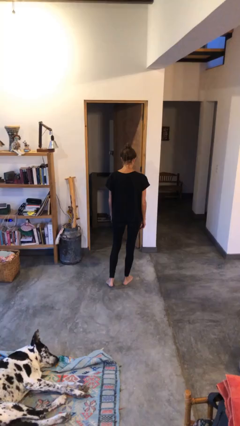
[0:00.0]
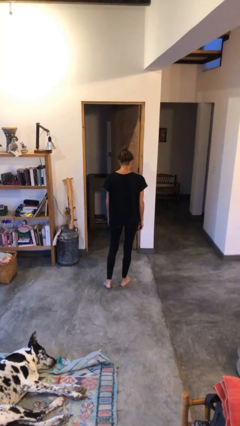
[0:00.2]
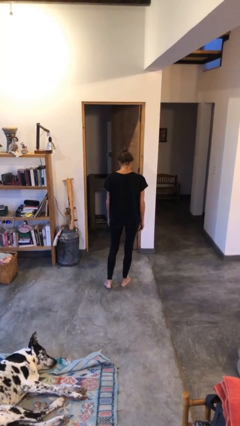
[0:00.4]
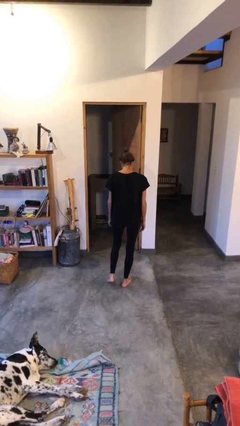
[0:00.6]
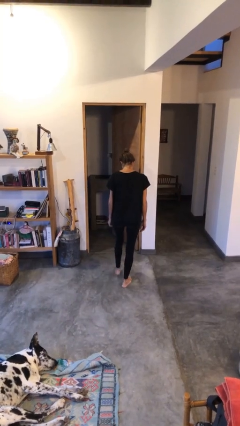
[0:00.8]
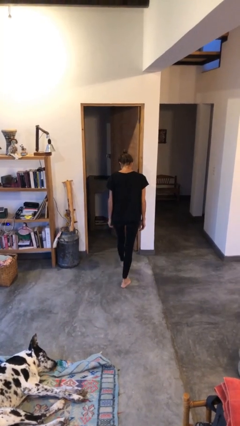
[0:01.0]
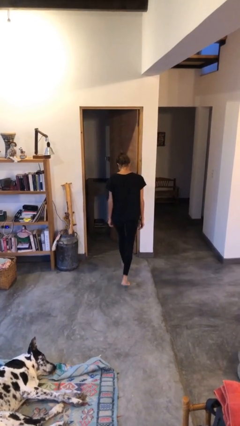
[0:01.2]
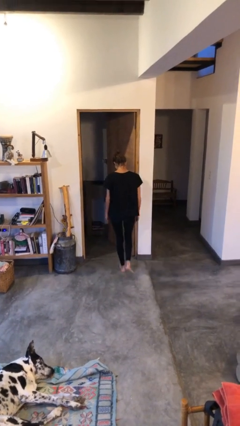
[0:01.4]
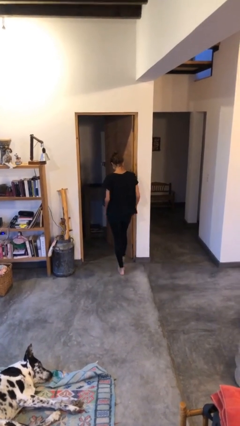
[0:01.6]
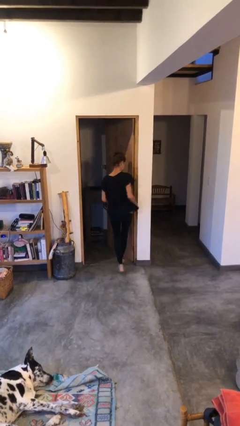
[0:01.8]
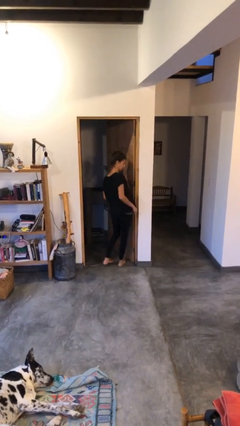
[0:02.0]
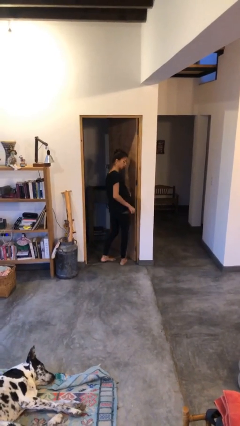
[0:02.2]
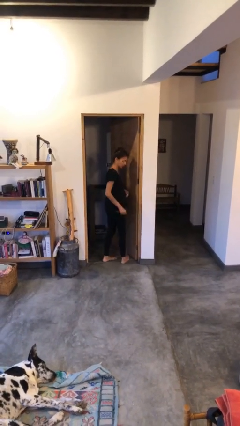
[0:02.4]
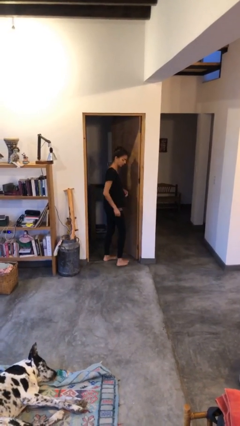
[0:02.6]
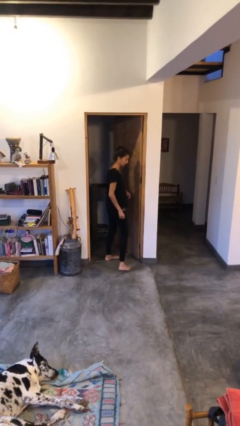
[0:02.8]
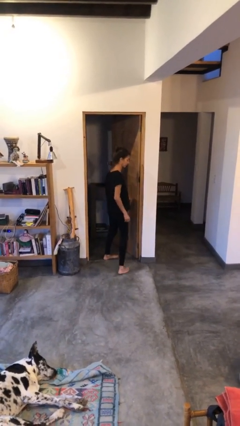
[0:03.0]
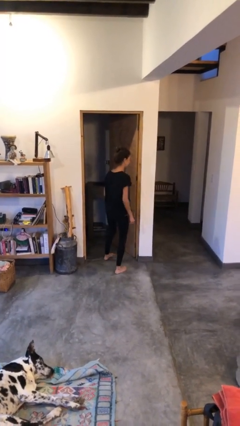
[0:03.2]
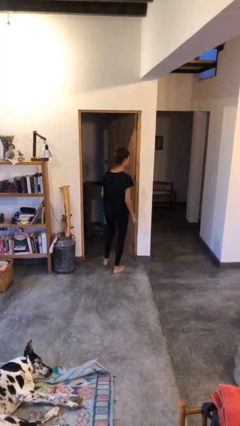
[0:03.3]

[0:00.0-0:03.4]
person bumps into wall

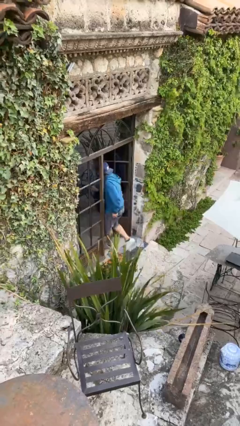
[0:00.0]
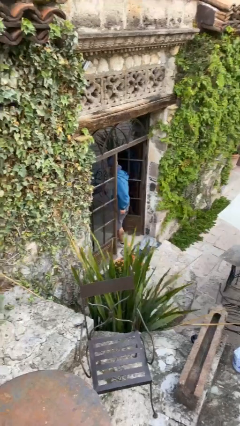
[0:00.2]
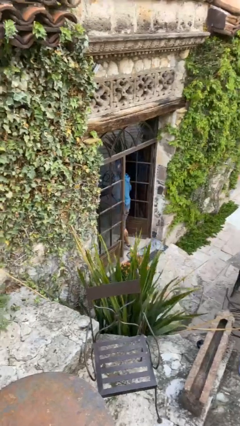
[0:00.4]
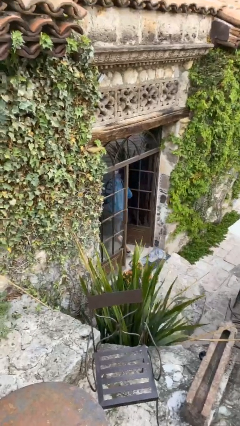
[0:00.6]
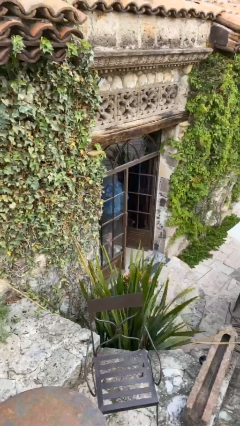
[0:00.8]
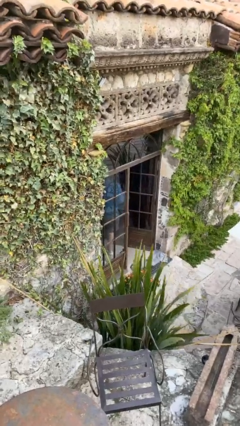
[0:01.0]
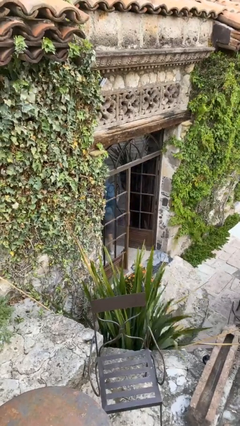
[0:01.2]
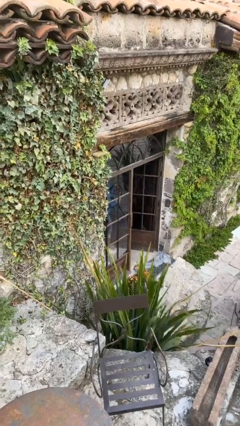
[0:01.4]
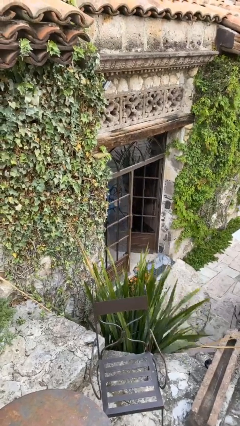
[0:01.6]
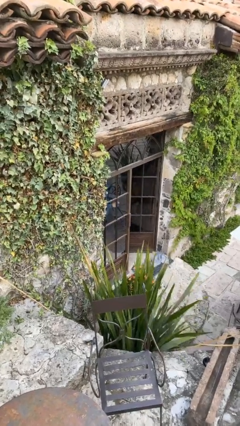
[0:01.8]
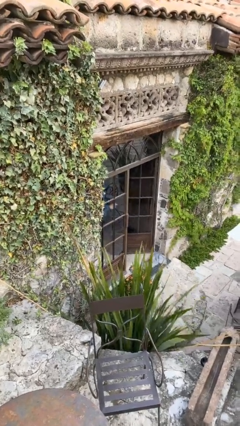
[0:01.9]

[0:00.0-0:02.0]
person exits scene through structure

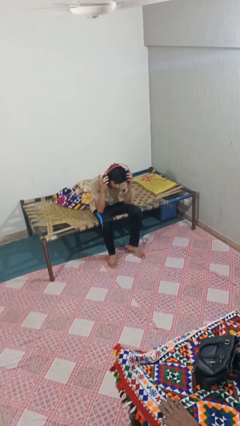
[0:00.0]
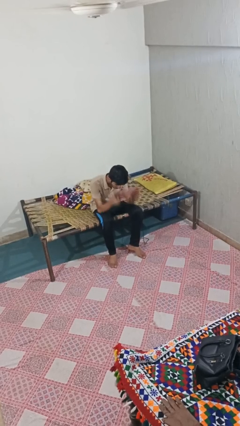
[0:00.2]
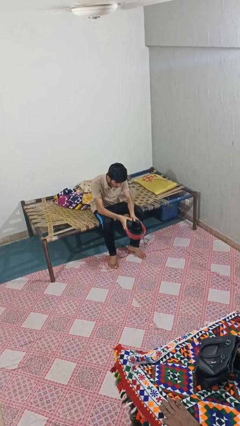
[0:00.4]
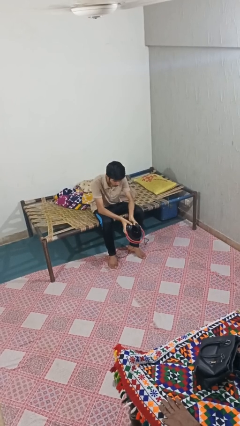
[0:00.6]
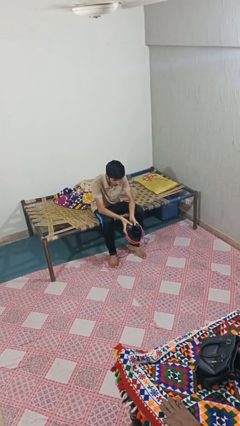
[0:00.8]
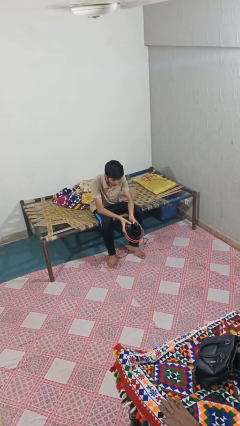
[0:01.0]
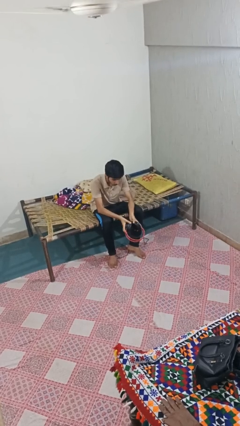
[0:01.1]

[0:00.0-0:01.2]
person takes off headphones

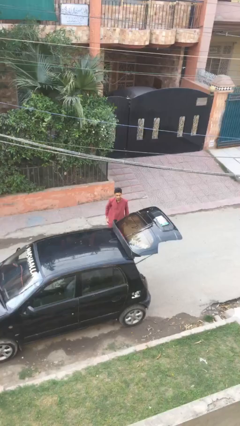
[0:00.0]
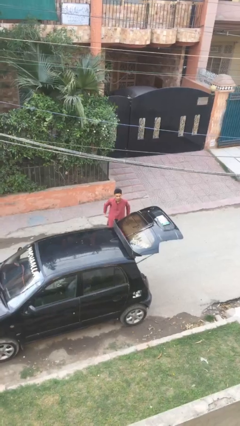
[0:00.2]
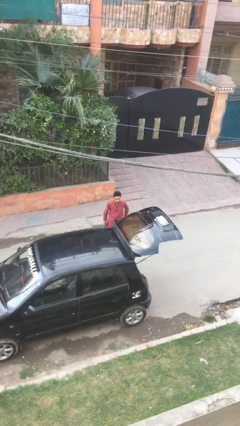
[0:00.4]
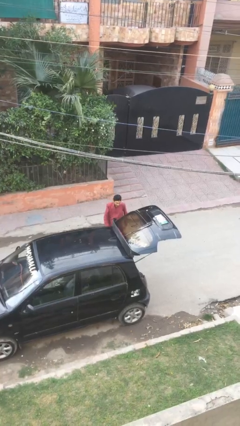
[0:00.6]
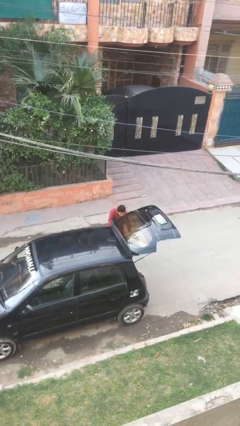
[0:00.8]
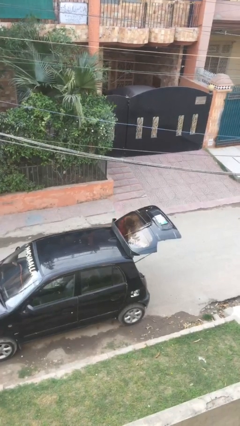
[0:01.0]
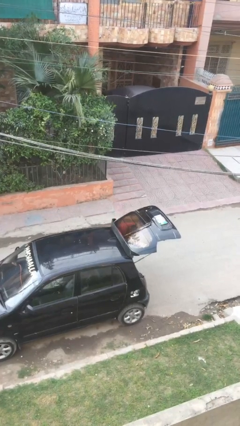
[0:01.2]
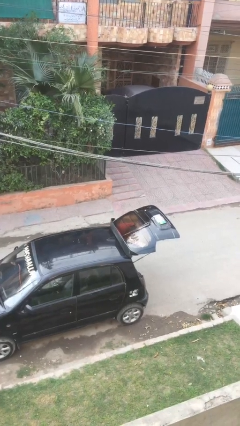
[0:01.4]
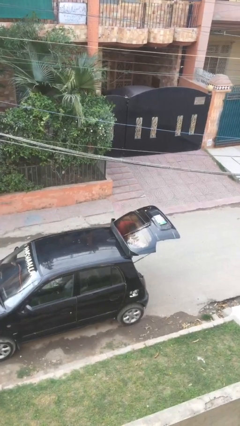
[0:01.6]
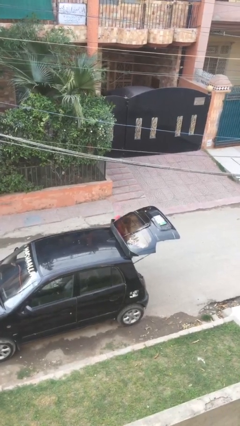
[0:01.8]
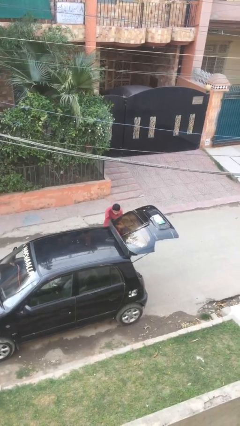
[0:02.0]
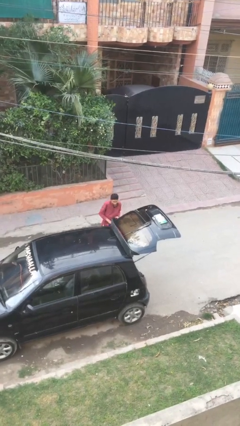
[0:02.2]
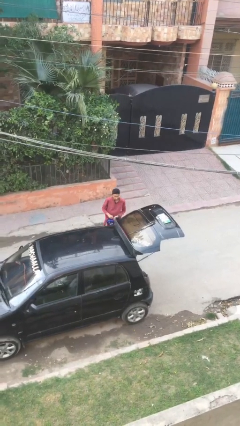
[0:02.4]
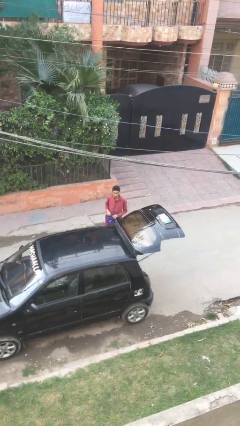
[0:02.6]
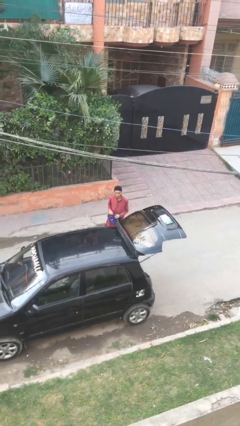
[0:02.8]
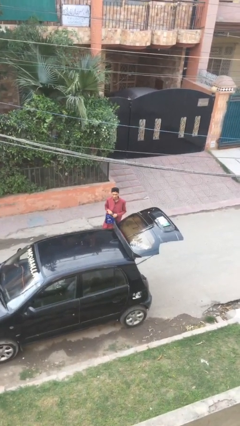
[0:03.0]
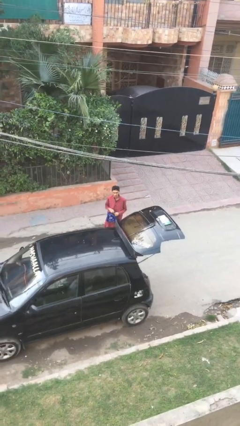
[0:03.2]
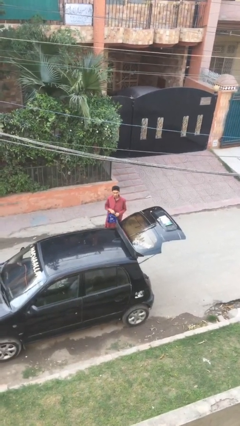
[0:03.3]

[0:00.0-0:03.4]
person unloads car

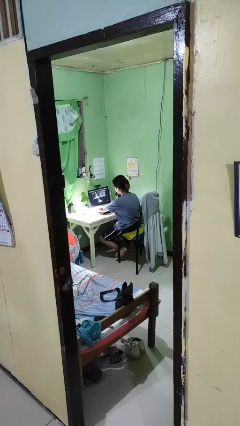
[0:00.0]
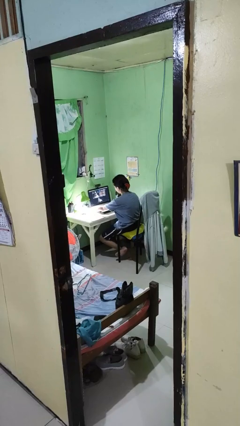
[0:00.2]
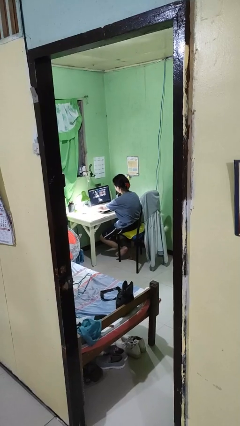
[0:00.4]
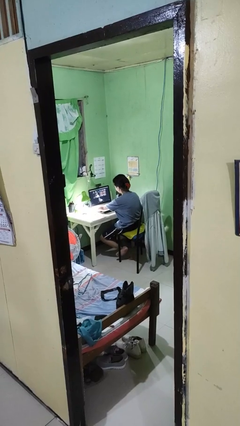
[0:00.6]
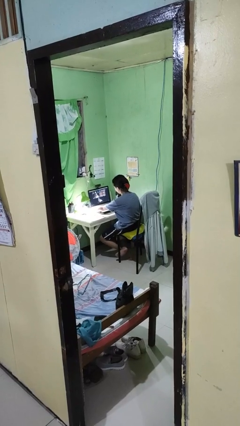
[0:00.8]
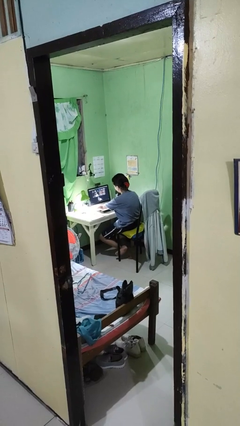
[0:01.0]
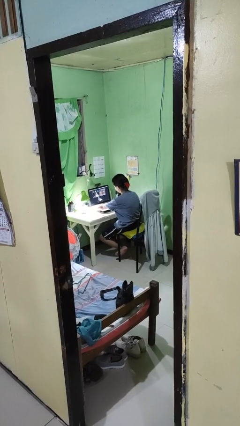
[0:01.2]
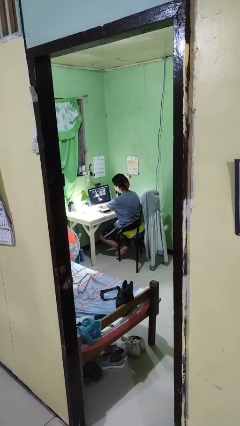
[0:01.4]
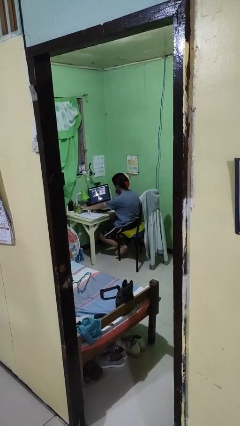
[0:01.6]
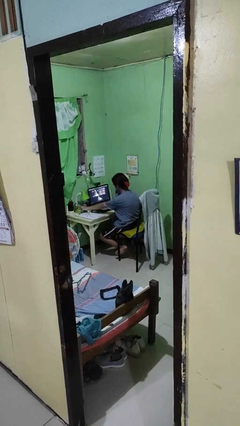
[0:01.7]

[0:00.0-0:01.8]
person turns off lamp

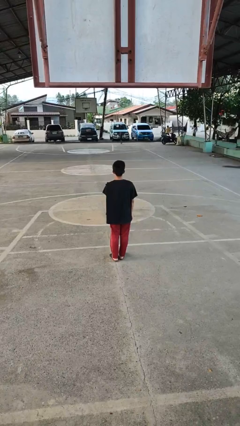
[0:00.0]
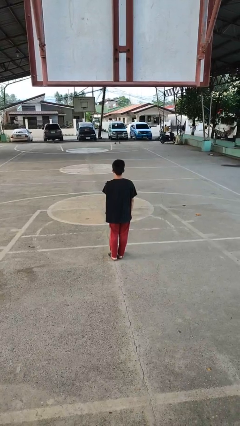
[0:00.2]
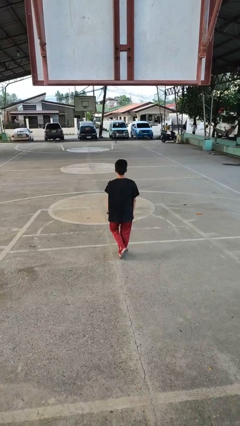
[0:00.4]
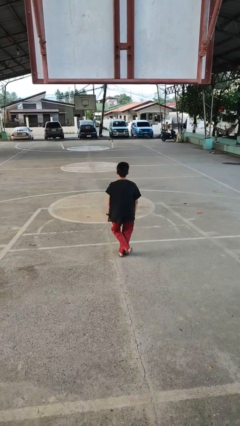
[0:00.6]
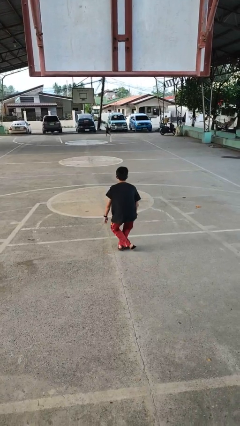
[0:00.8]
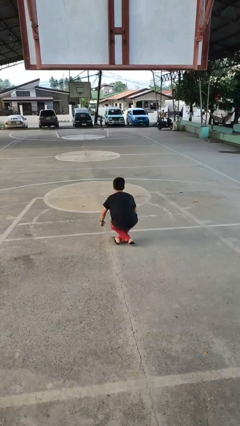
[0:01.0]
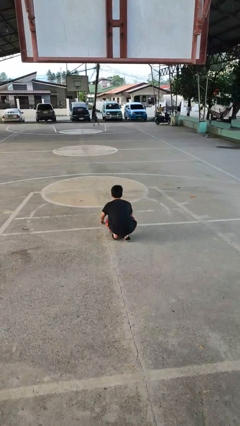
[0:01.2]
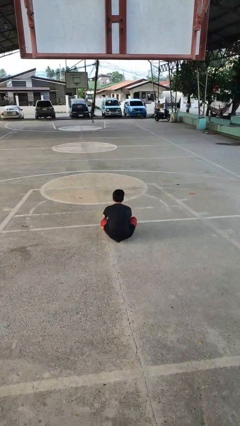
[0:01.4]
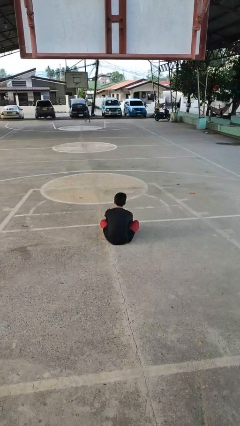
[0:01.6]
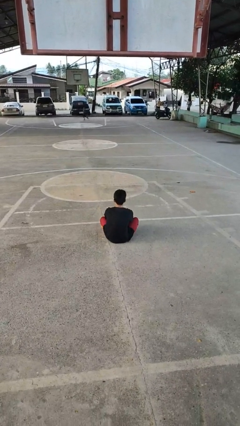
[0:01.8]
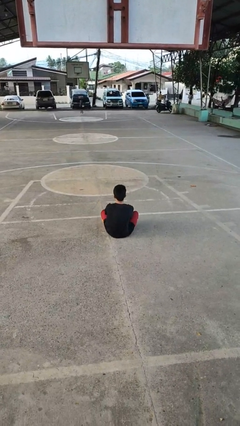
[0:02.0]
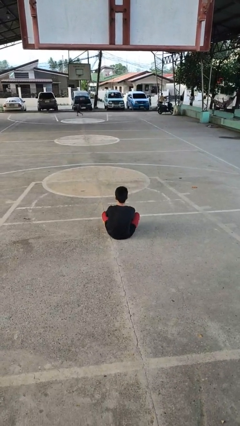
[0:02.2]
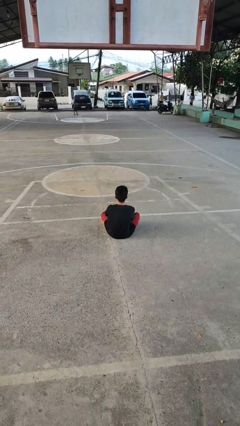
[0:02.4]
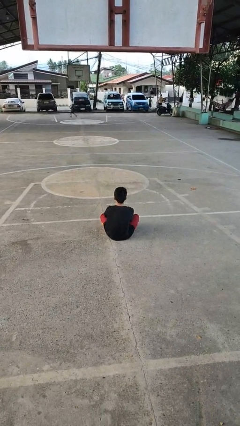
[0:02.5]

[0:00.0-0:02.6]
person sits crisscross

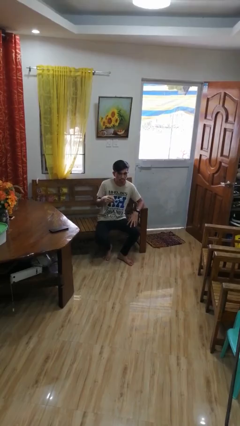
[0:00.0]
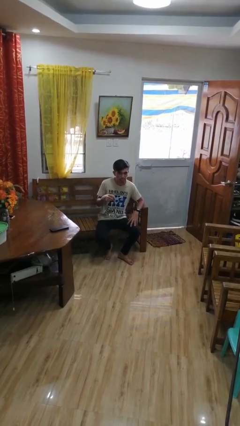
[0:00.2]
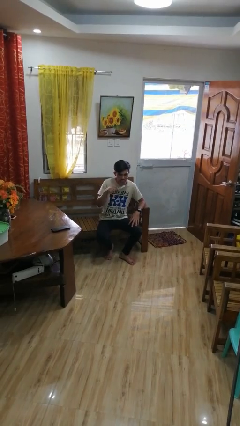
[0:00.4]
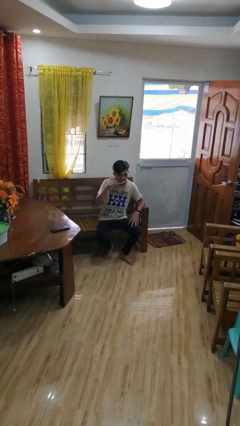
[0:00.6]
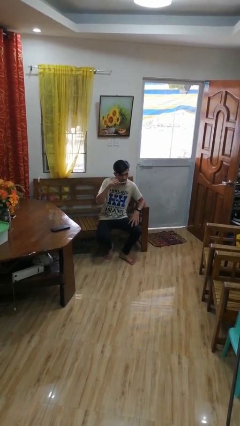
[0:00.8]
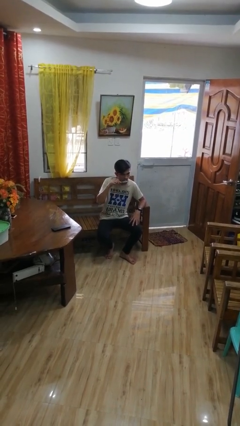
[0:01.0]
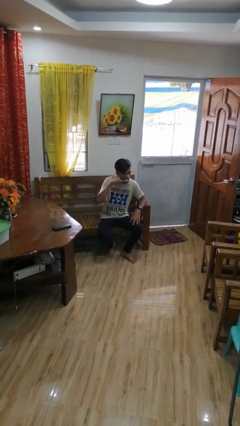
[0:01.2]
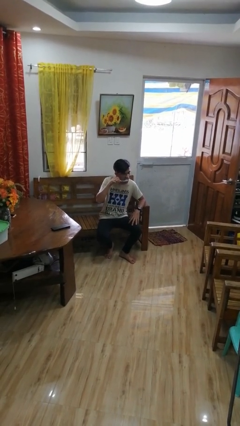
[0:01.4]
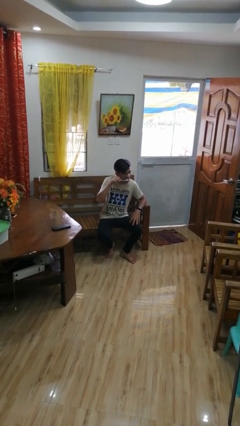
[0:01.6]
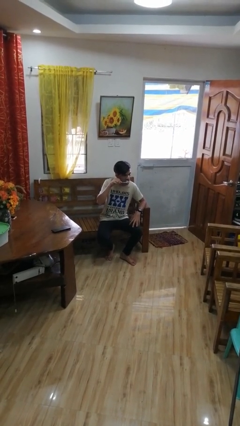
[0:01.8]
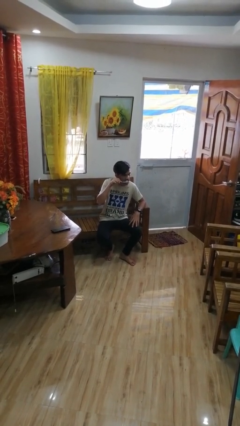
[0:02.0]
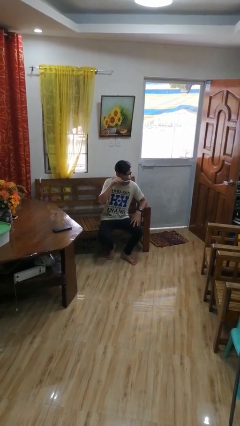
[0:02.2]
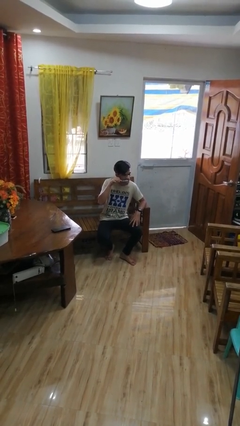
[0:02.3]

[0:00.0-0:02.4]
person brushes teeth
